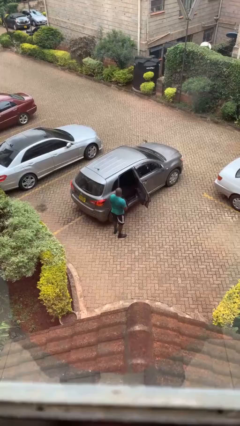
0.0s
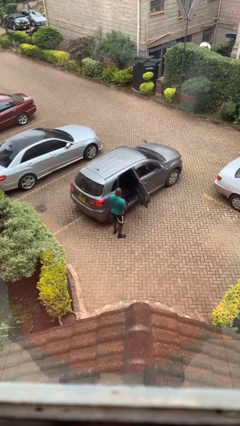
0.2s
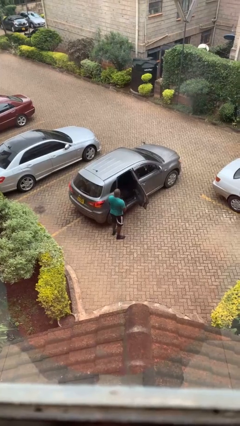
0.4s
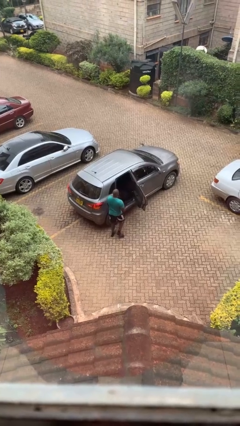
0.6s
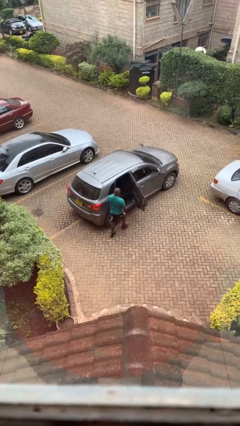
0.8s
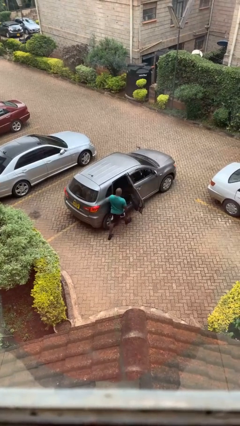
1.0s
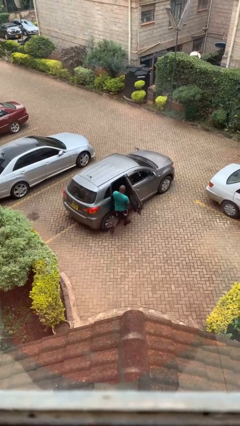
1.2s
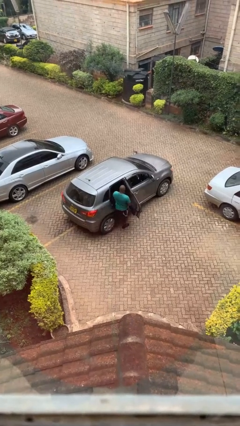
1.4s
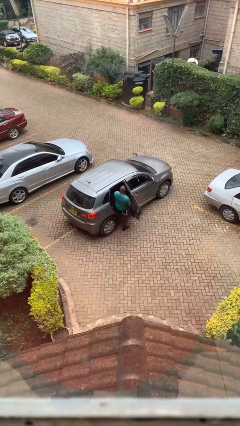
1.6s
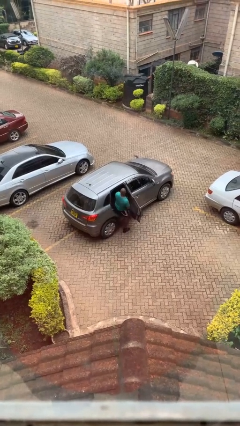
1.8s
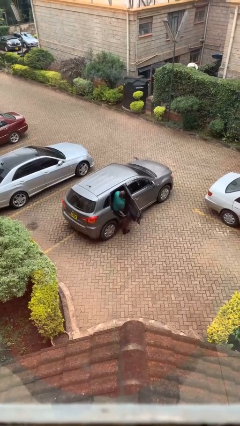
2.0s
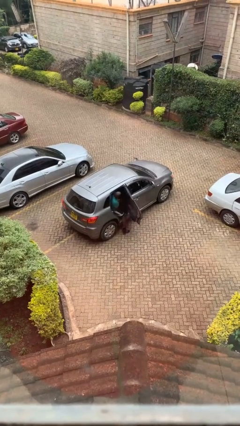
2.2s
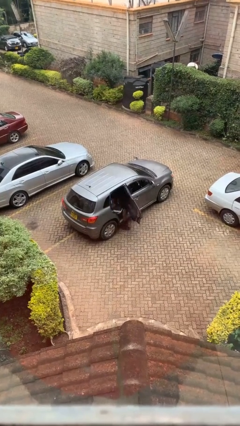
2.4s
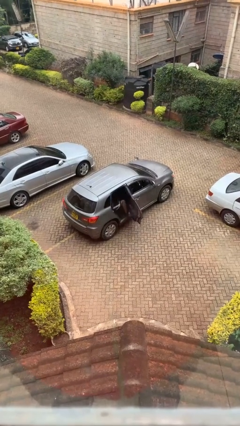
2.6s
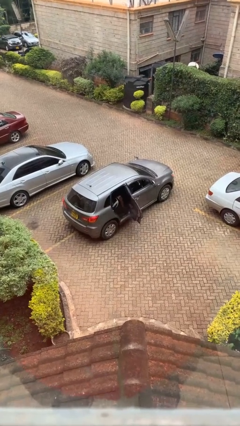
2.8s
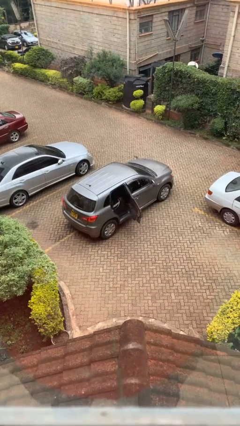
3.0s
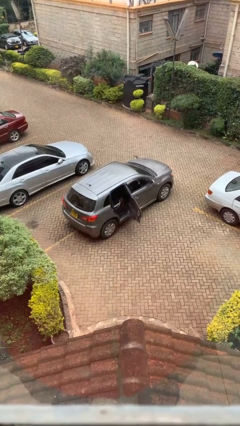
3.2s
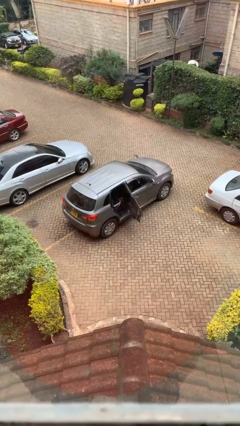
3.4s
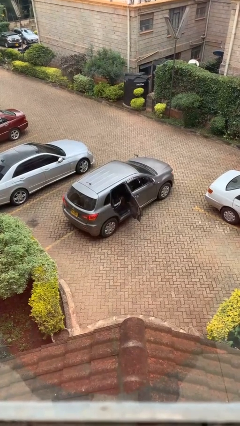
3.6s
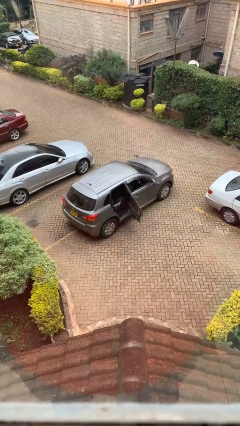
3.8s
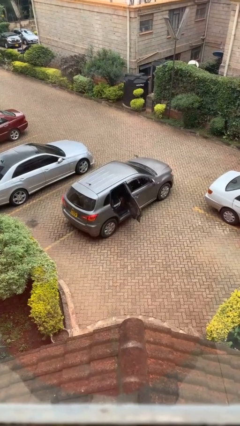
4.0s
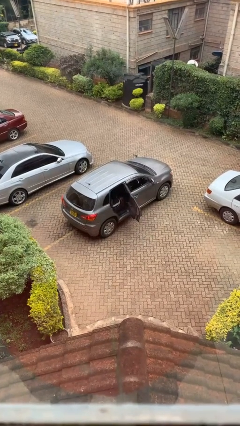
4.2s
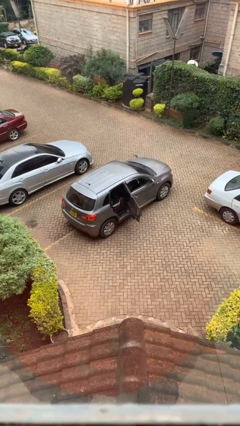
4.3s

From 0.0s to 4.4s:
person enters car

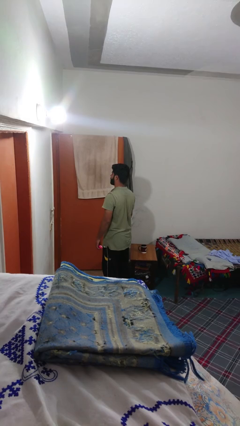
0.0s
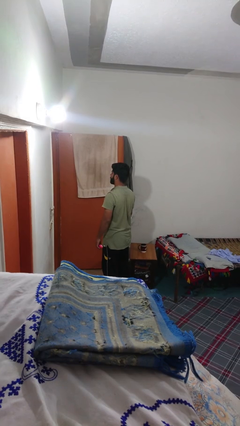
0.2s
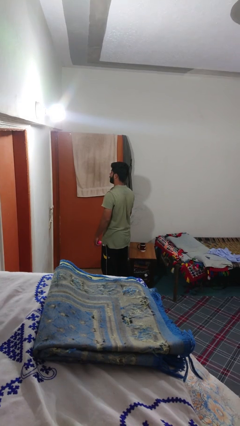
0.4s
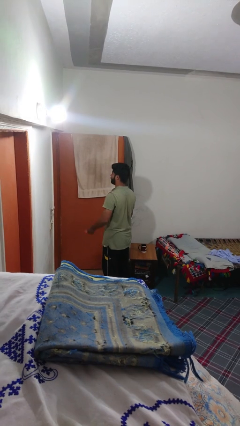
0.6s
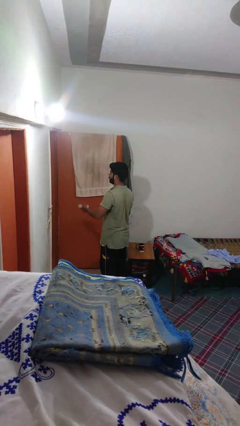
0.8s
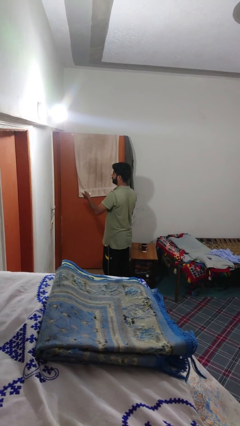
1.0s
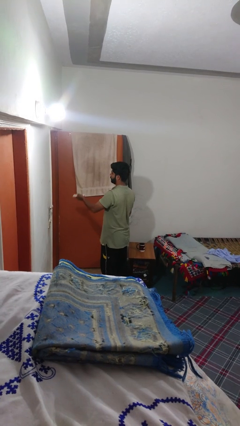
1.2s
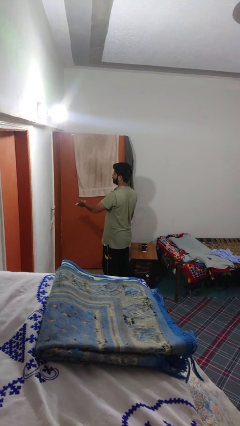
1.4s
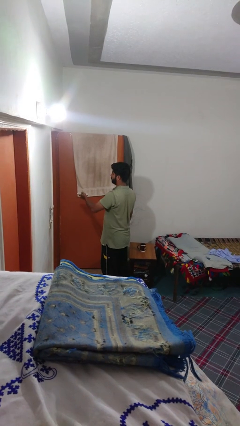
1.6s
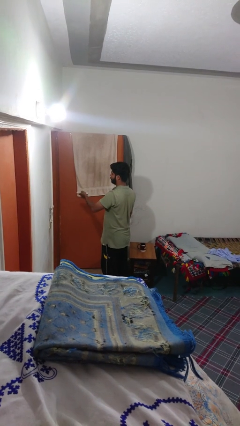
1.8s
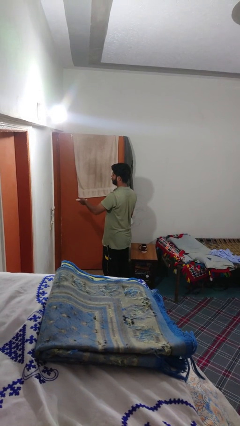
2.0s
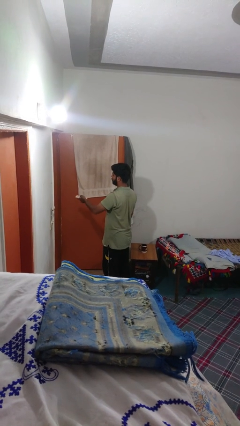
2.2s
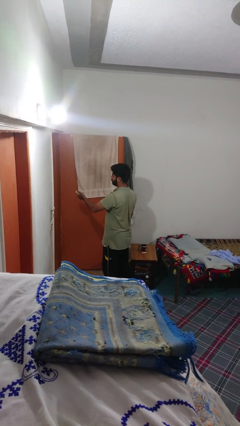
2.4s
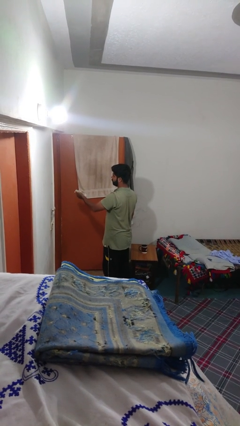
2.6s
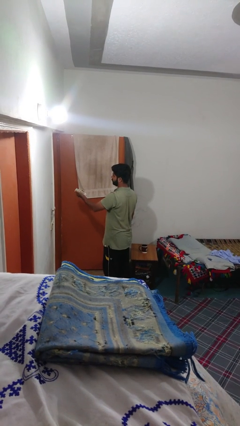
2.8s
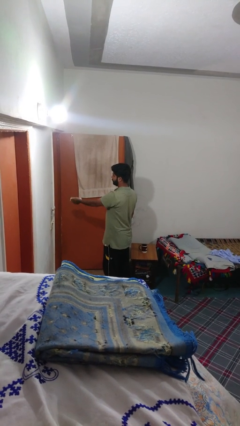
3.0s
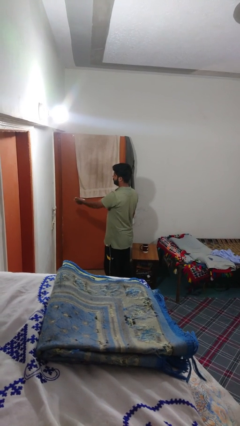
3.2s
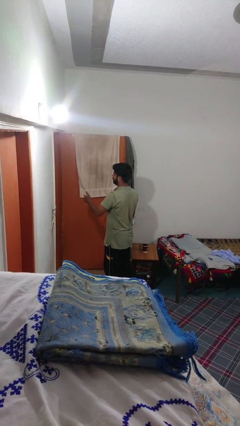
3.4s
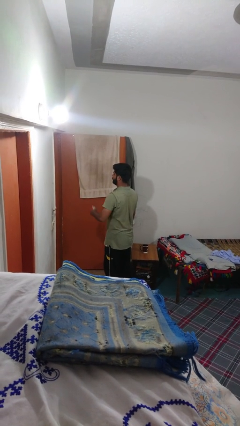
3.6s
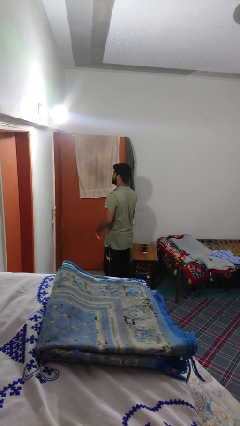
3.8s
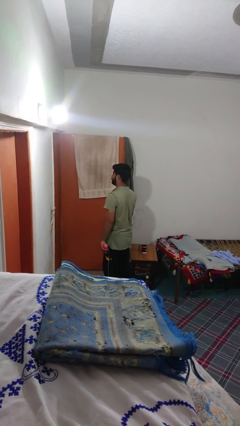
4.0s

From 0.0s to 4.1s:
person uses television remote

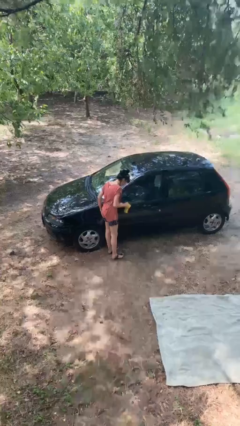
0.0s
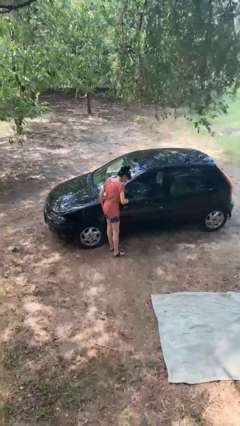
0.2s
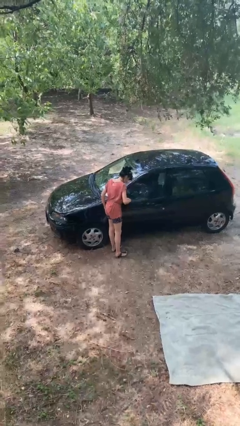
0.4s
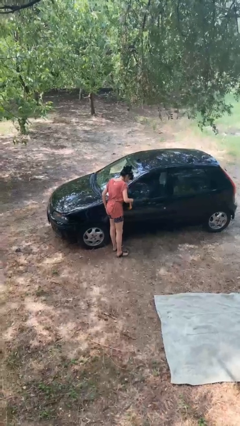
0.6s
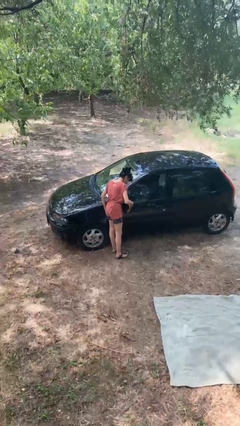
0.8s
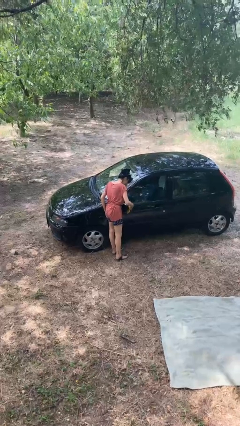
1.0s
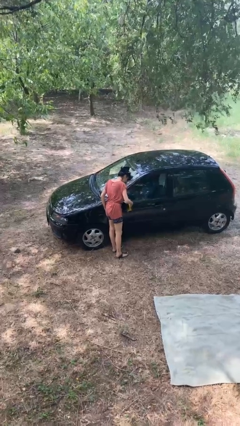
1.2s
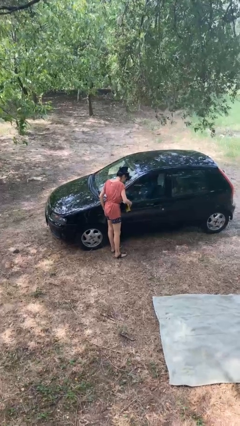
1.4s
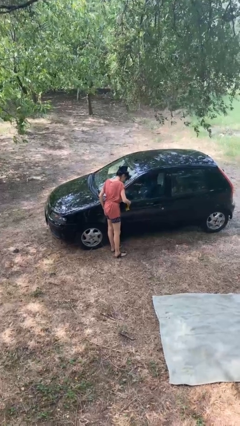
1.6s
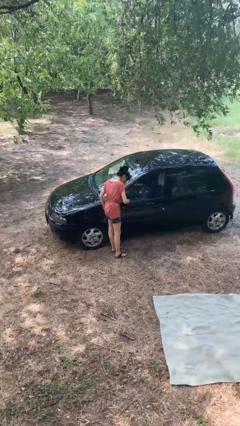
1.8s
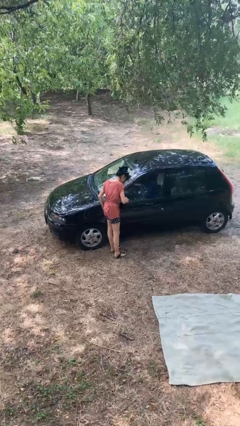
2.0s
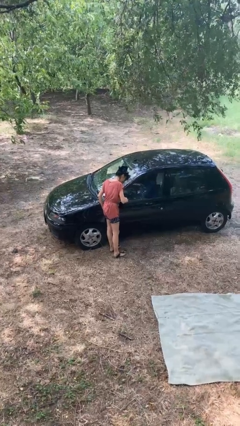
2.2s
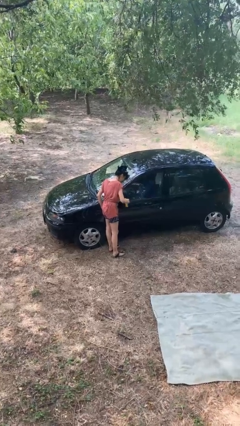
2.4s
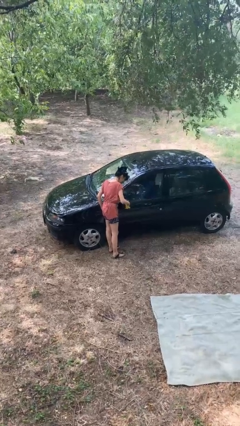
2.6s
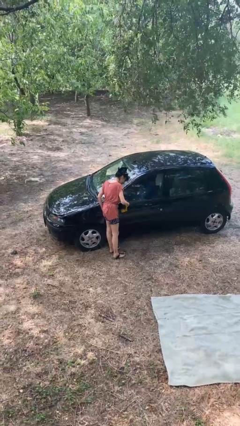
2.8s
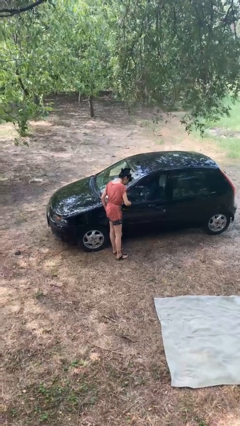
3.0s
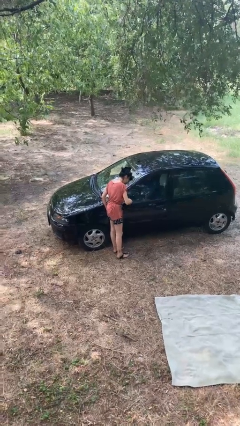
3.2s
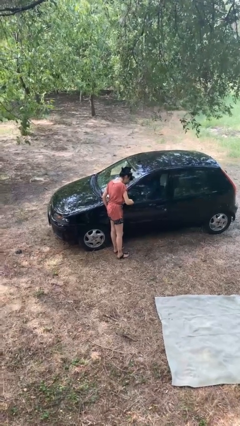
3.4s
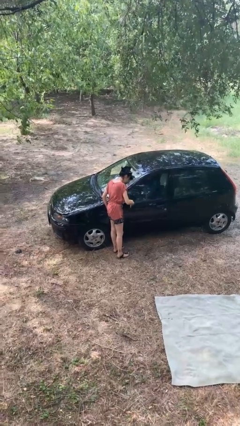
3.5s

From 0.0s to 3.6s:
person polishes car with rag

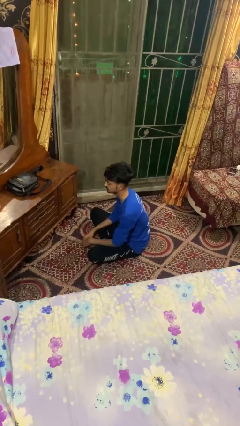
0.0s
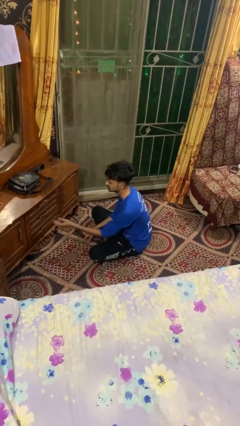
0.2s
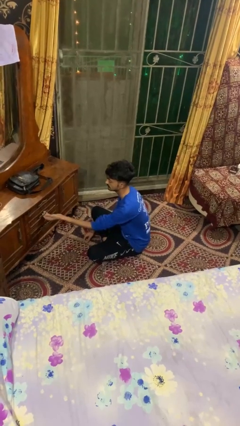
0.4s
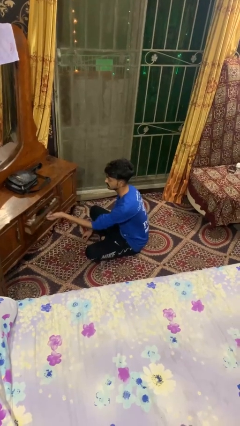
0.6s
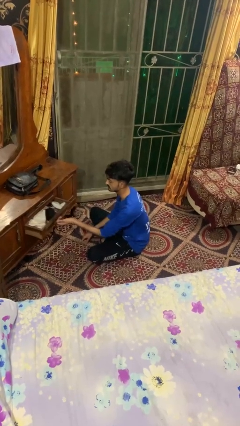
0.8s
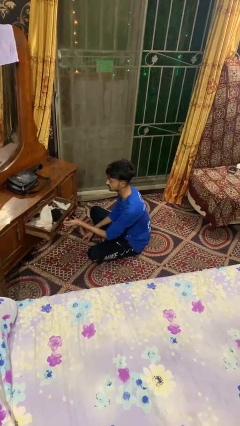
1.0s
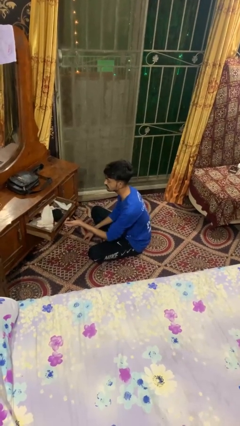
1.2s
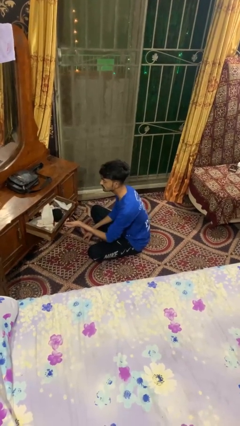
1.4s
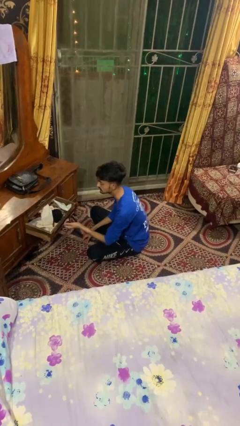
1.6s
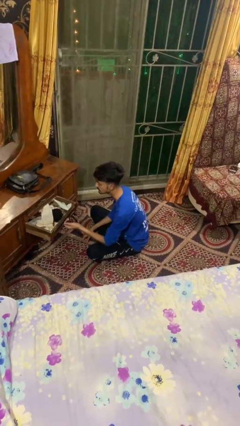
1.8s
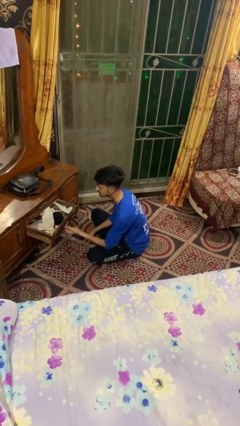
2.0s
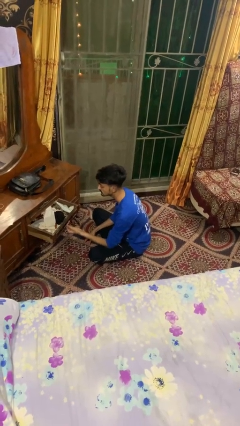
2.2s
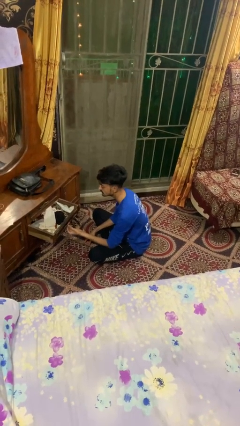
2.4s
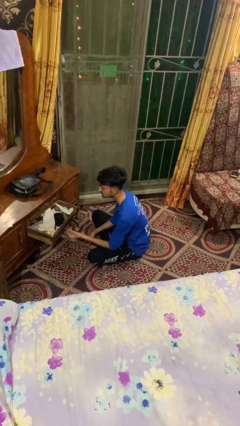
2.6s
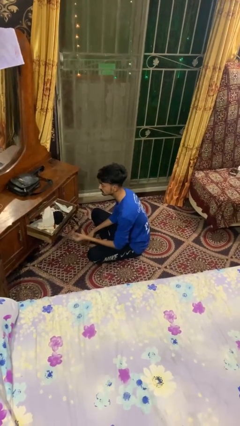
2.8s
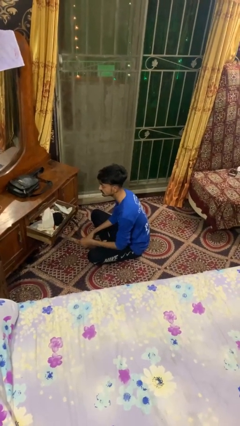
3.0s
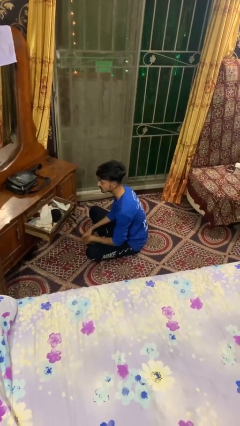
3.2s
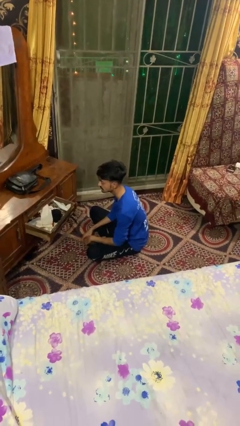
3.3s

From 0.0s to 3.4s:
person opens dresser drawer

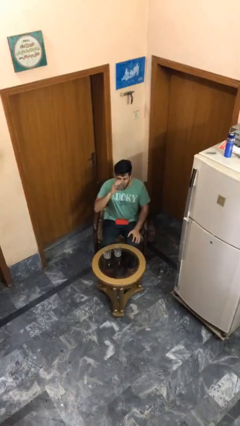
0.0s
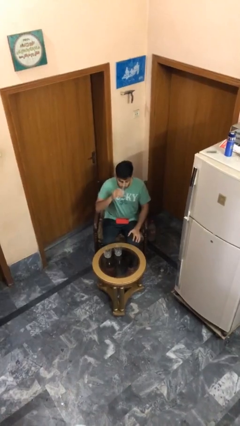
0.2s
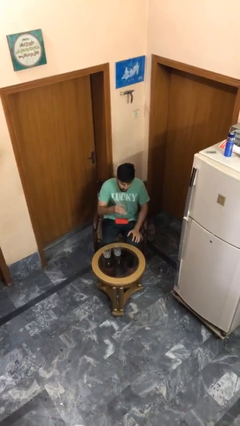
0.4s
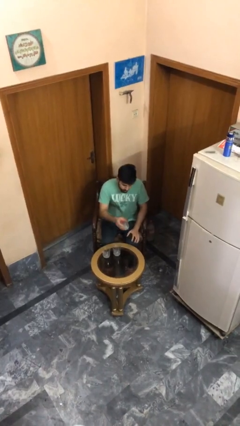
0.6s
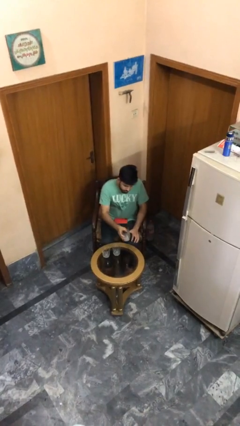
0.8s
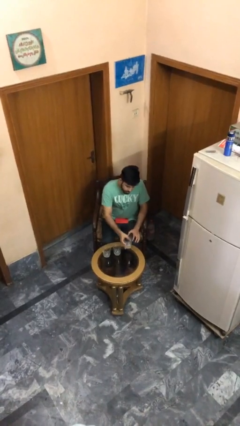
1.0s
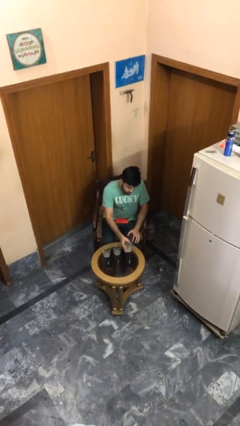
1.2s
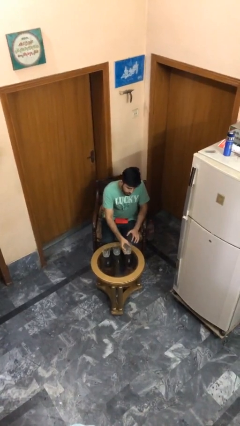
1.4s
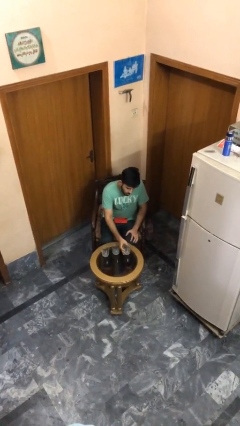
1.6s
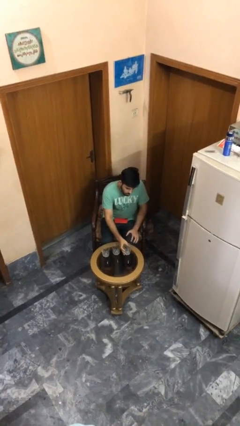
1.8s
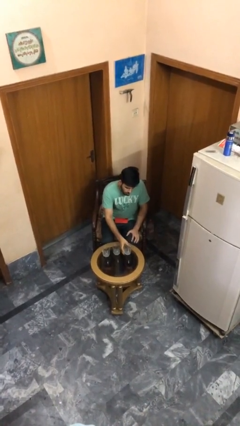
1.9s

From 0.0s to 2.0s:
person puts down object on table

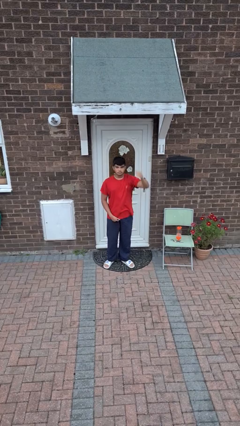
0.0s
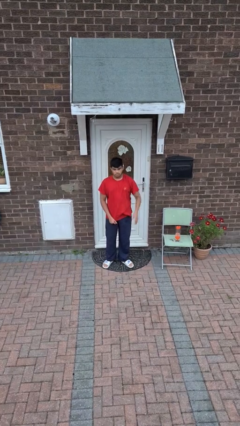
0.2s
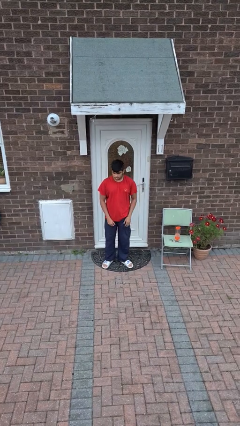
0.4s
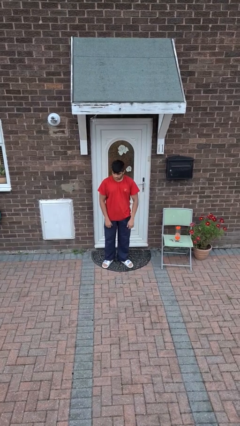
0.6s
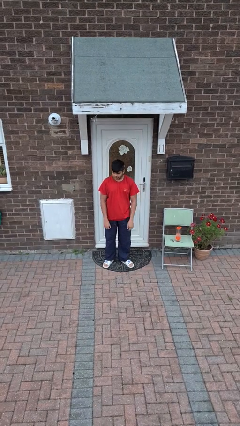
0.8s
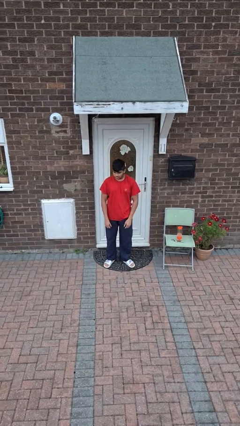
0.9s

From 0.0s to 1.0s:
person gestures lower hand
